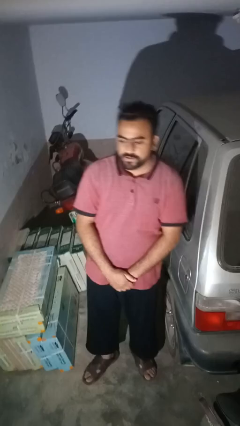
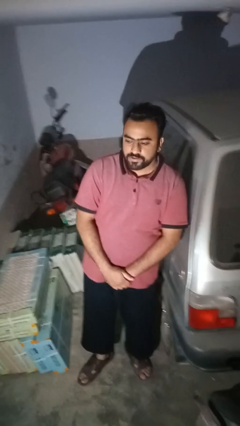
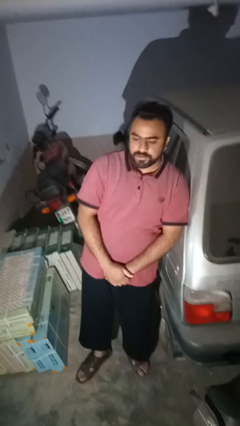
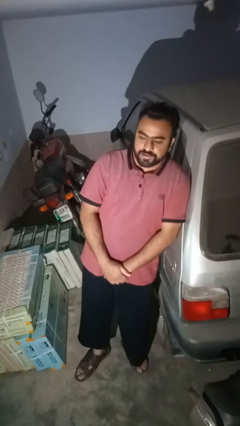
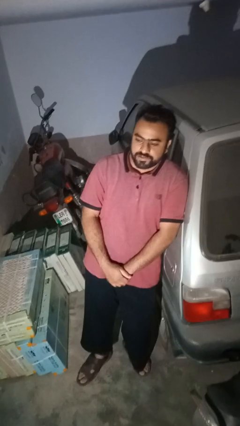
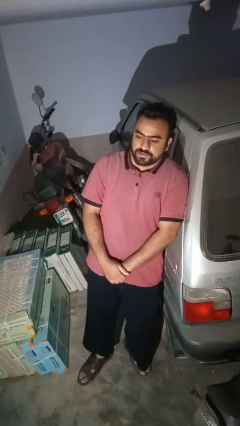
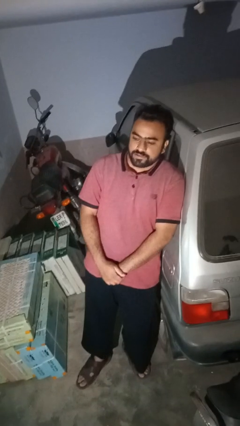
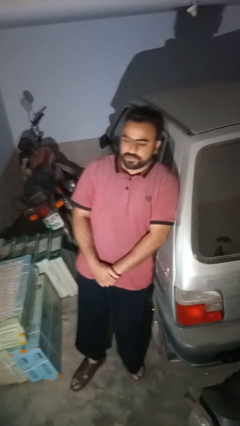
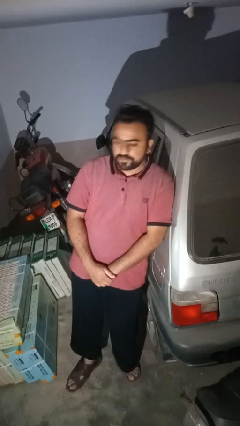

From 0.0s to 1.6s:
person leans against car

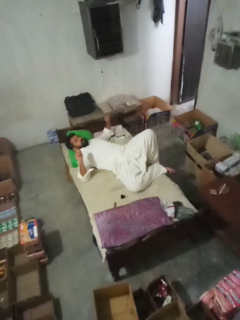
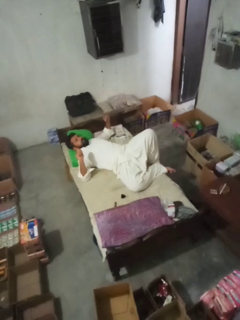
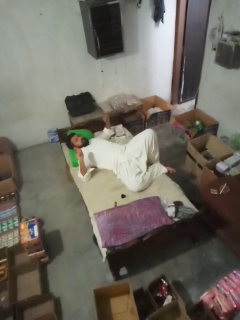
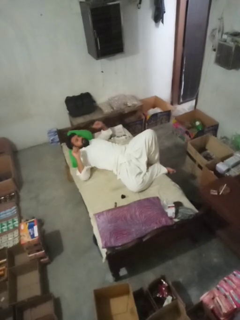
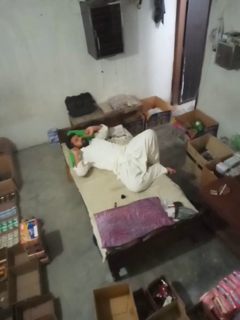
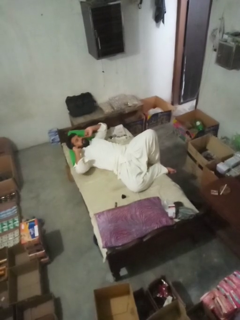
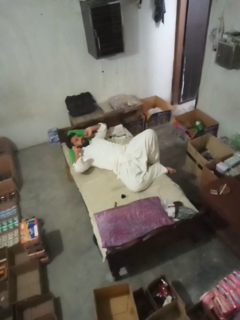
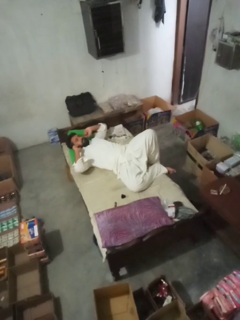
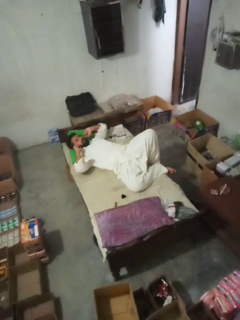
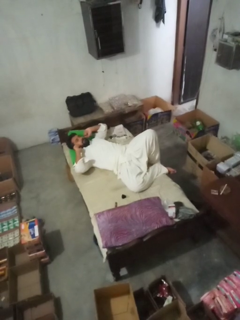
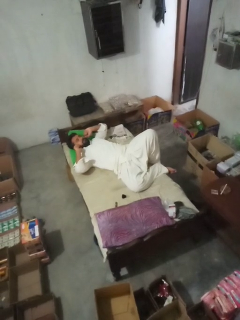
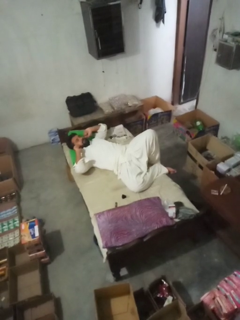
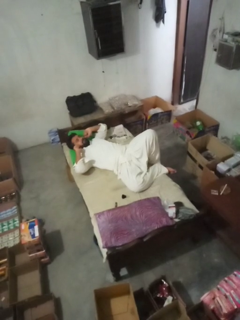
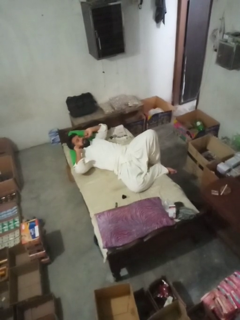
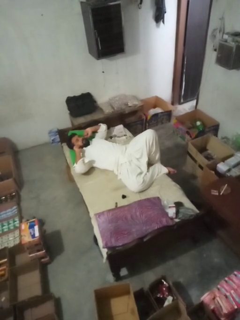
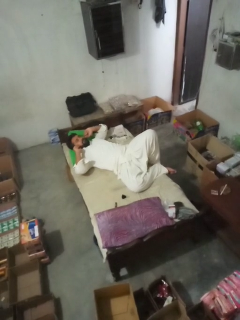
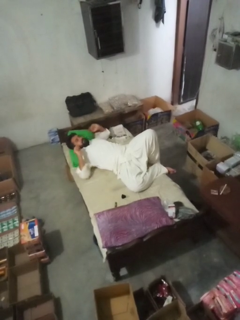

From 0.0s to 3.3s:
person puts fingers in ear

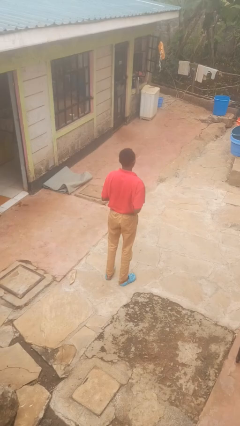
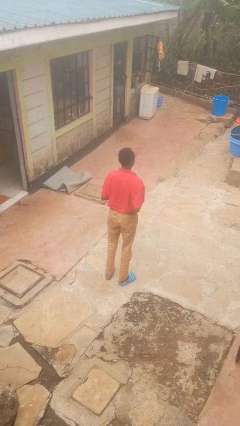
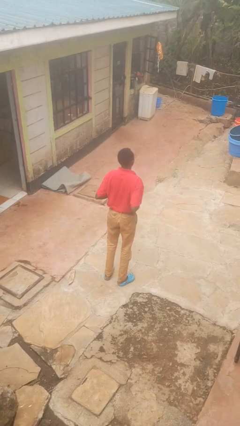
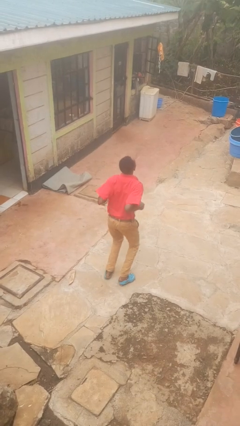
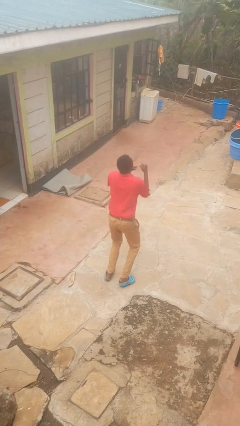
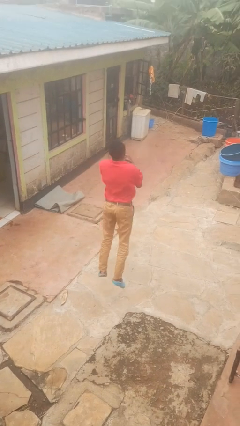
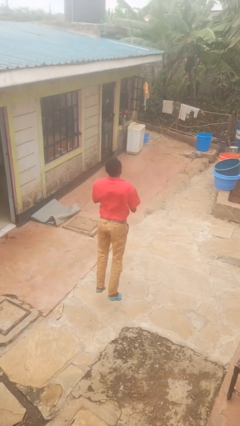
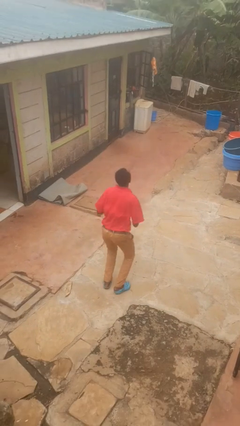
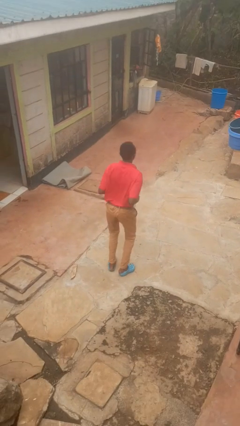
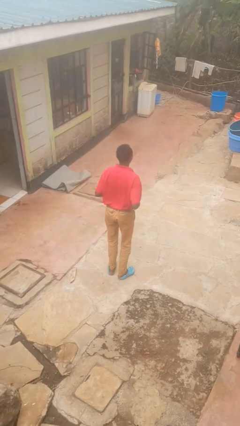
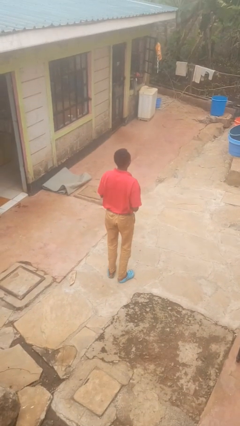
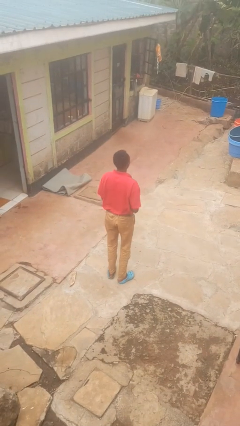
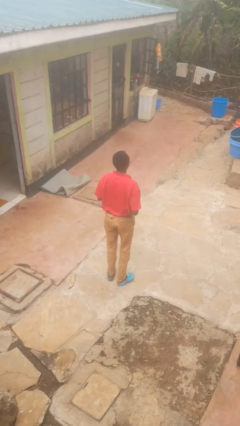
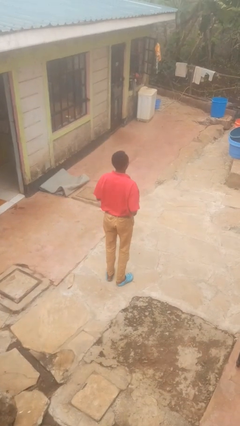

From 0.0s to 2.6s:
person jumps

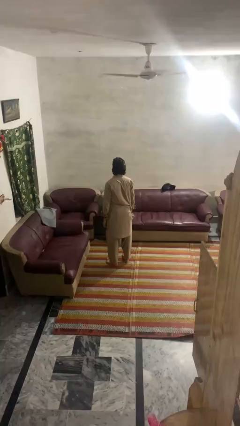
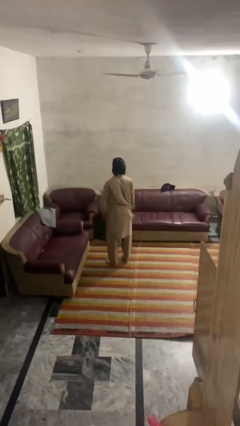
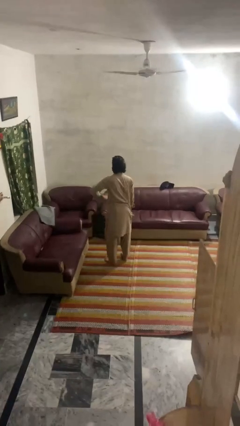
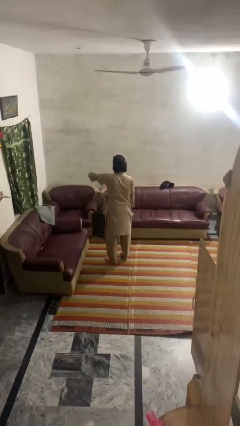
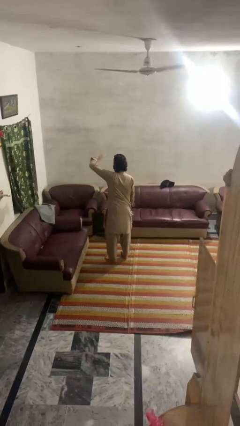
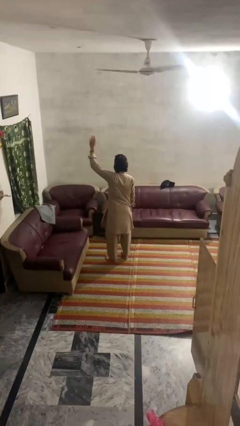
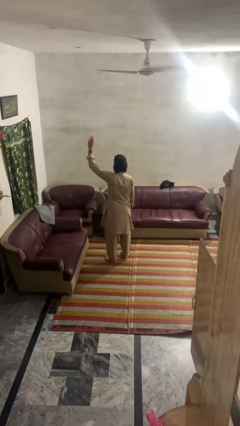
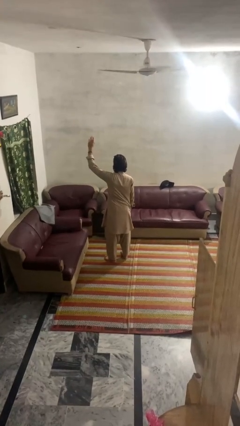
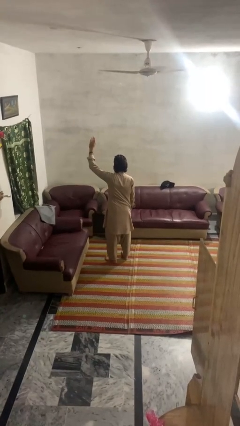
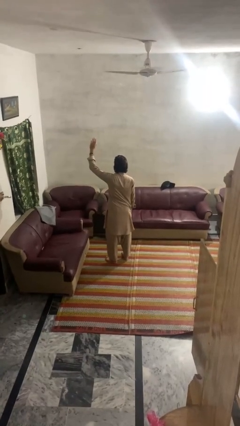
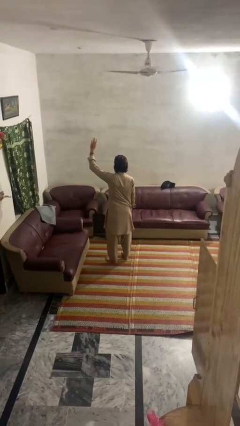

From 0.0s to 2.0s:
person gestures swipe up

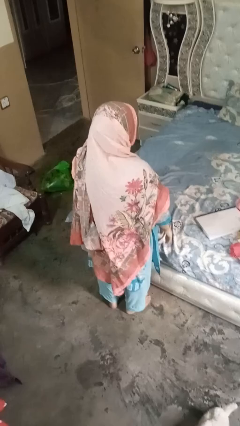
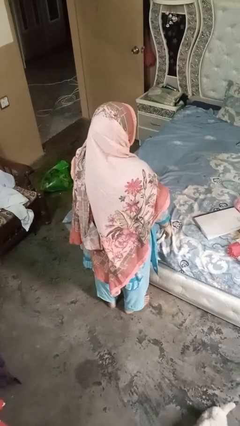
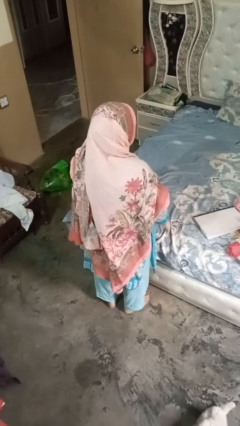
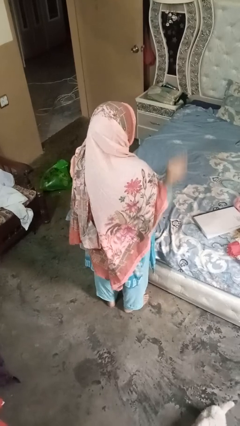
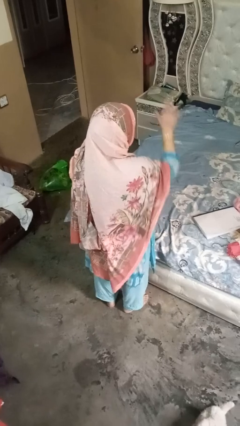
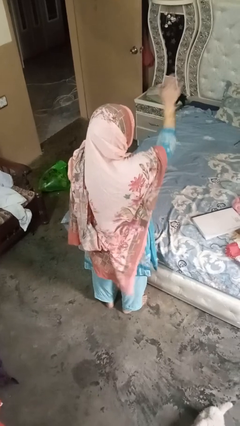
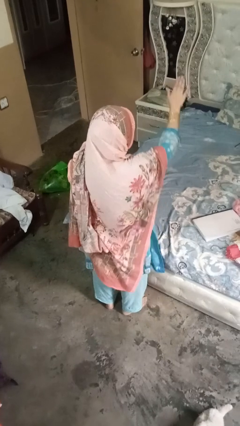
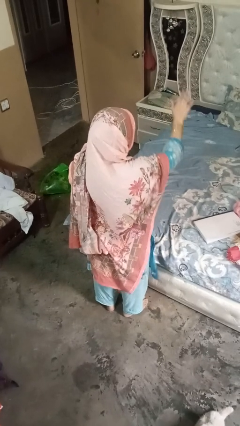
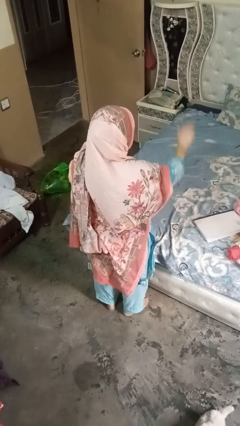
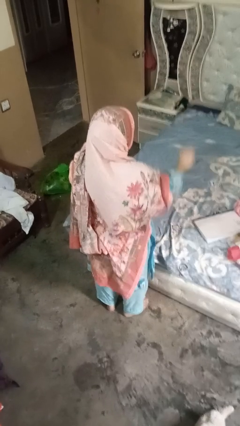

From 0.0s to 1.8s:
person gestures stop

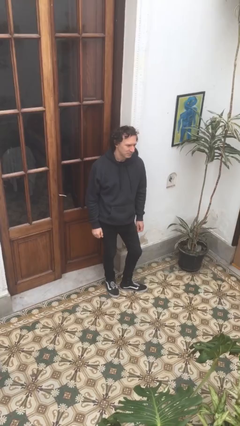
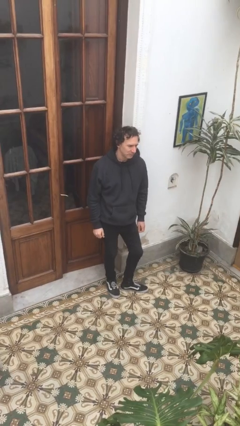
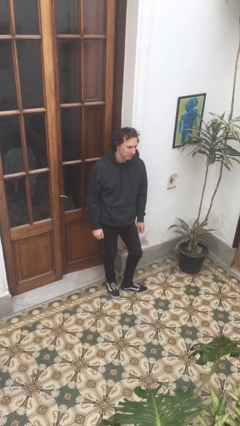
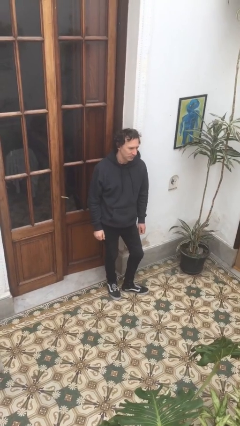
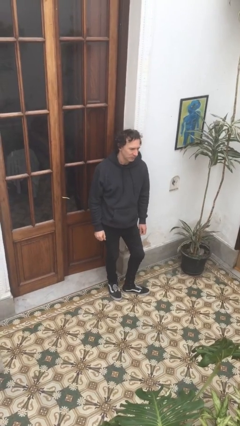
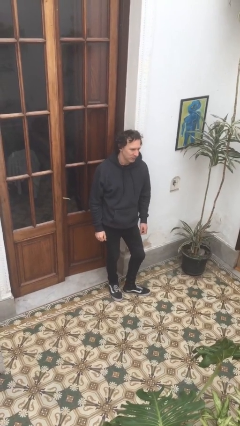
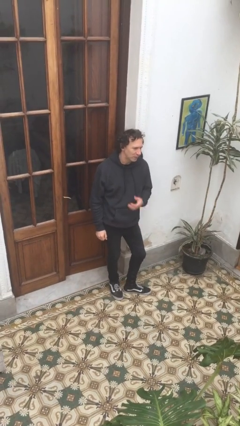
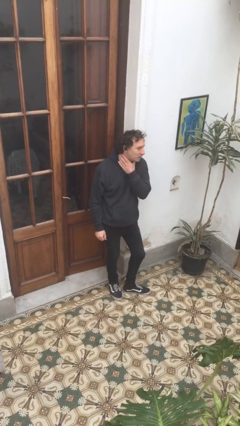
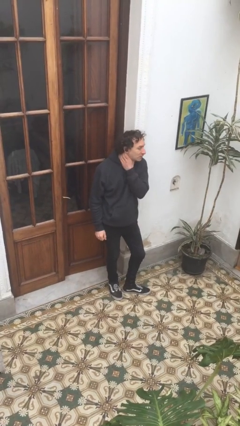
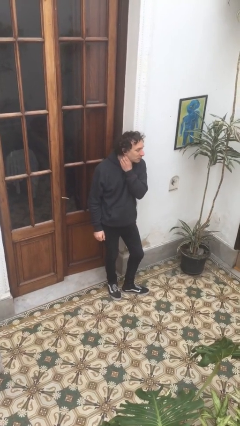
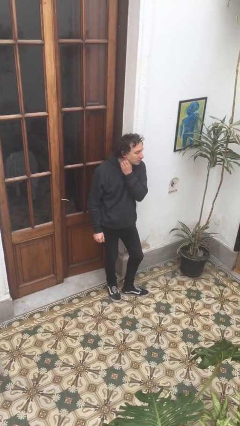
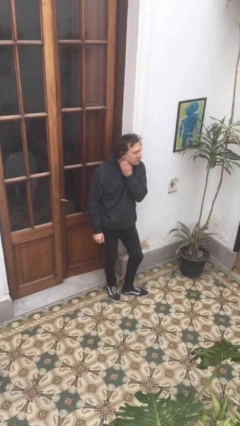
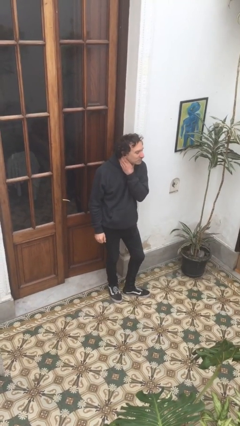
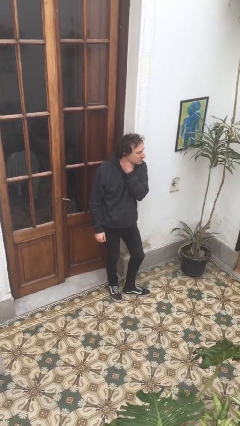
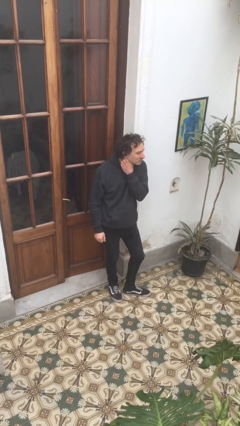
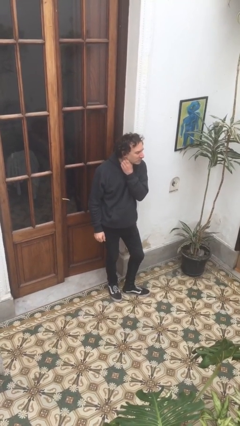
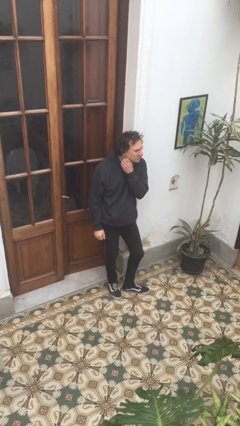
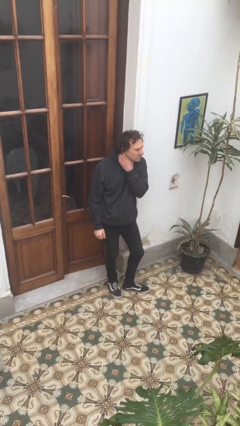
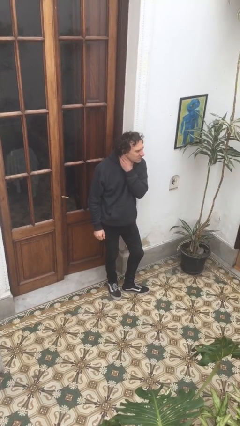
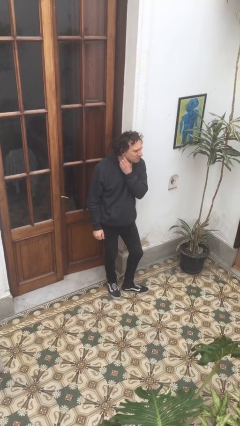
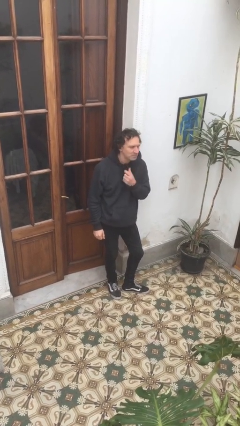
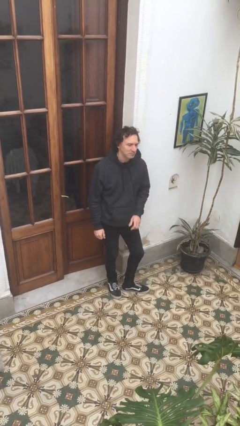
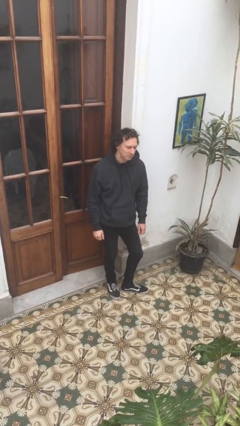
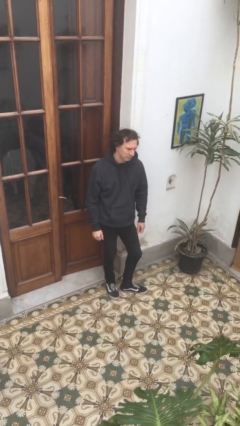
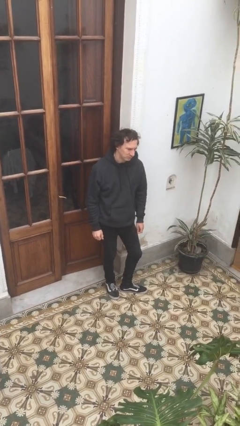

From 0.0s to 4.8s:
person rubs neck

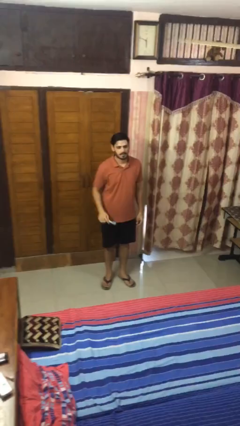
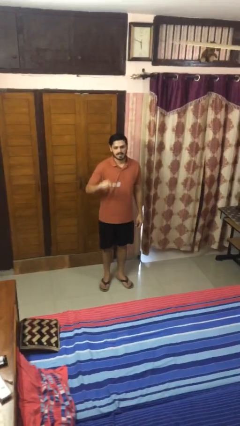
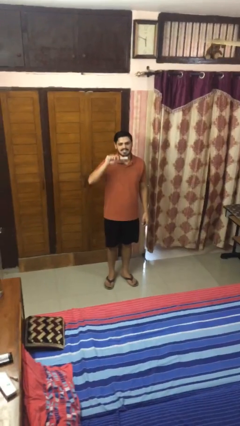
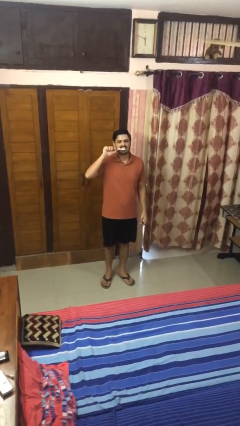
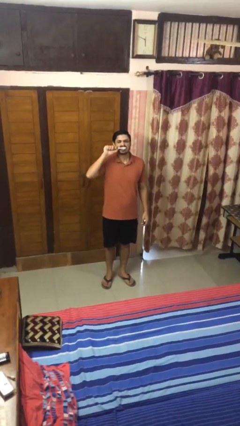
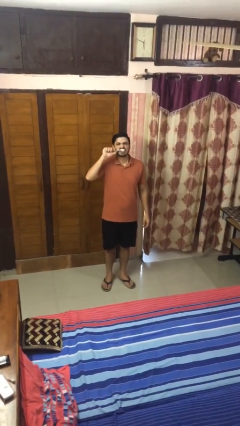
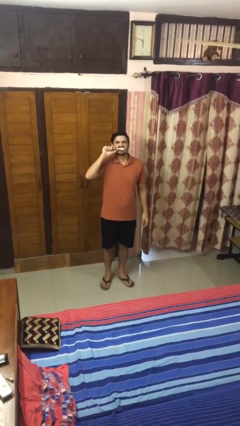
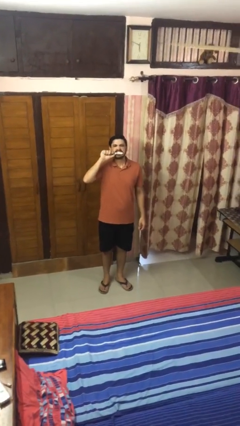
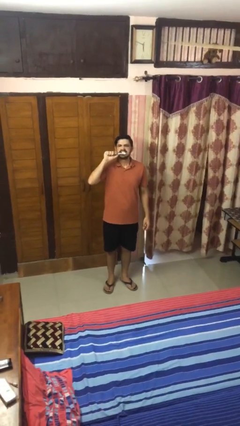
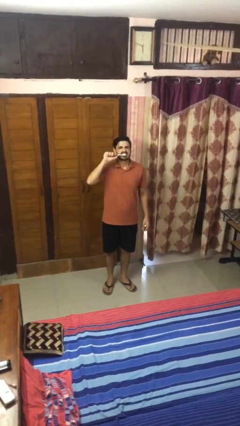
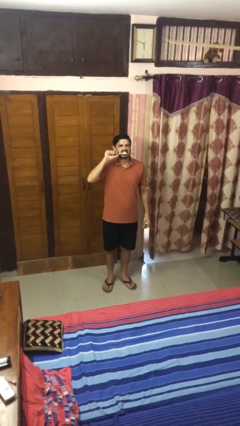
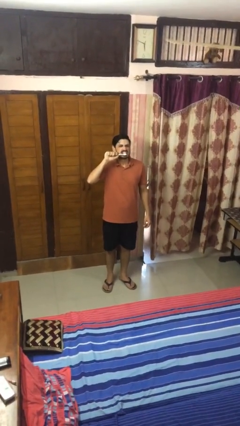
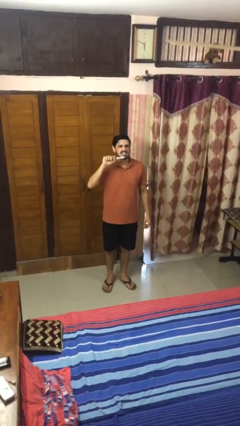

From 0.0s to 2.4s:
person brushes teeth
